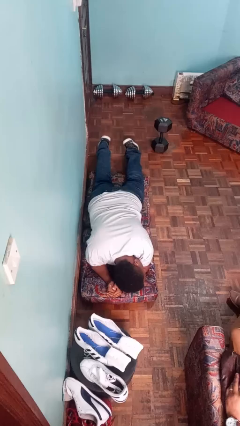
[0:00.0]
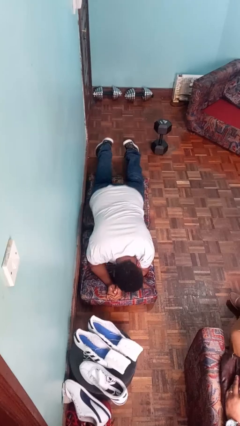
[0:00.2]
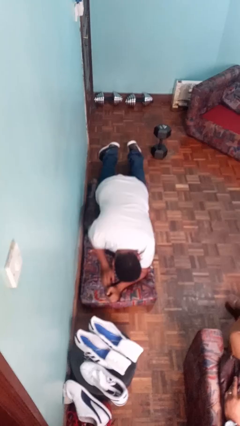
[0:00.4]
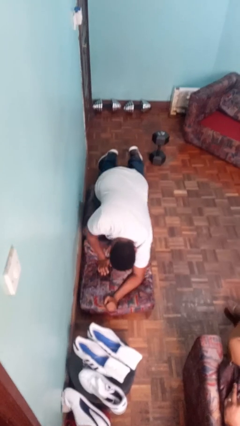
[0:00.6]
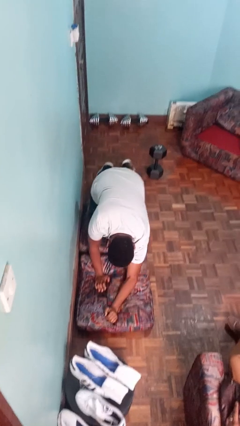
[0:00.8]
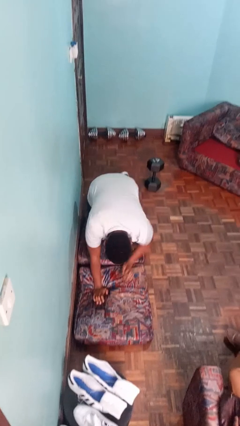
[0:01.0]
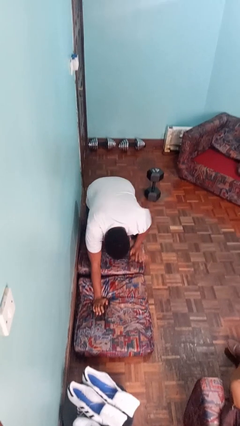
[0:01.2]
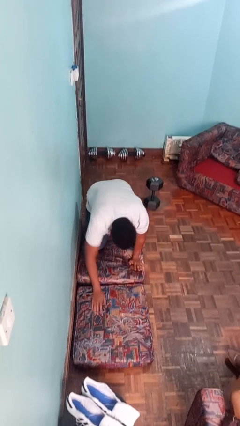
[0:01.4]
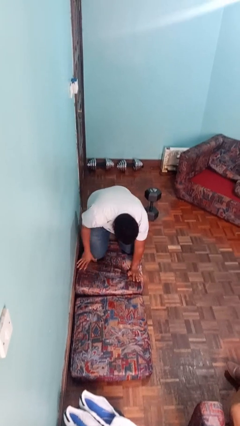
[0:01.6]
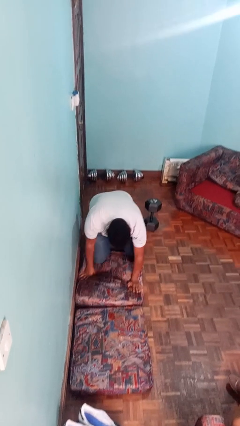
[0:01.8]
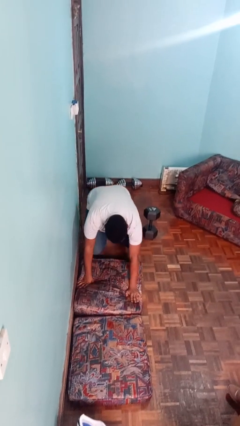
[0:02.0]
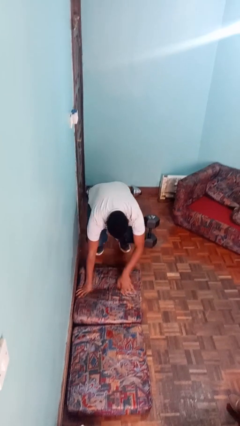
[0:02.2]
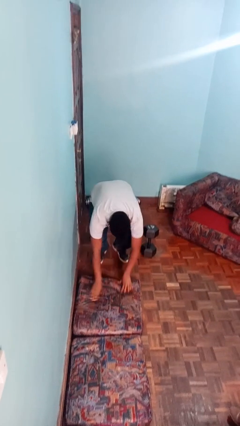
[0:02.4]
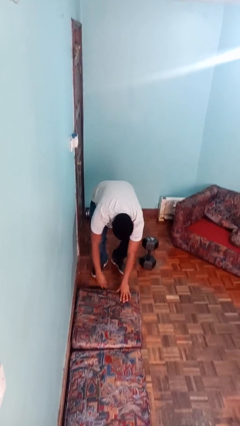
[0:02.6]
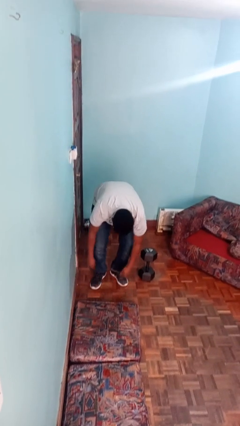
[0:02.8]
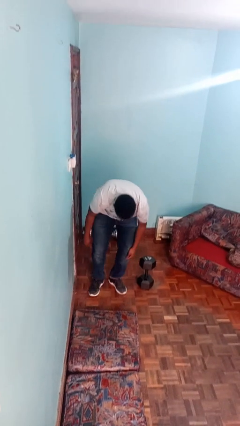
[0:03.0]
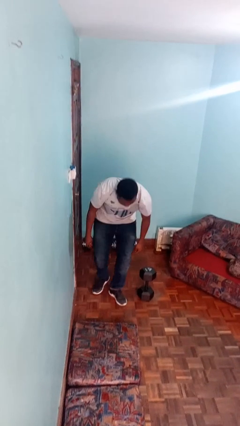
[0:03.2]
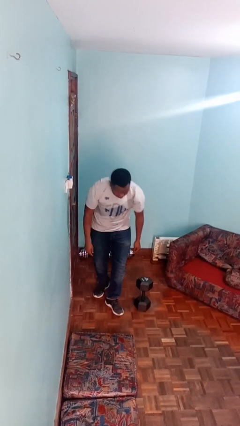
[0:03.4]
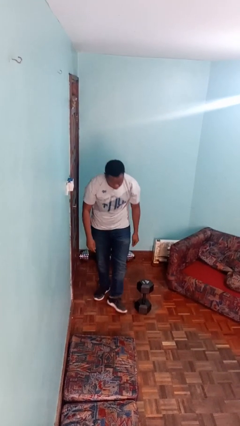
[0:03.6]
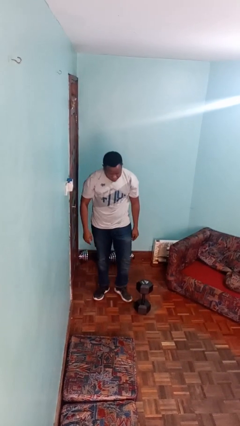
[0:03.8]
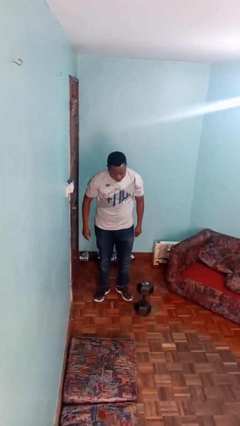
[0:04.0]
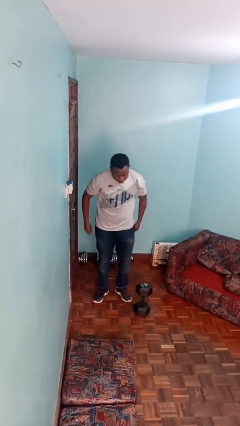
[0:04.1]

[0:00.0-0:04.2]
person stands up from floor

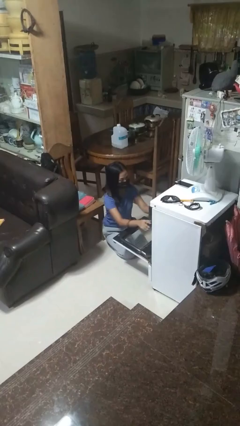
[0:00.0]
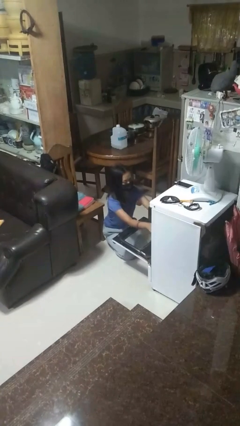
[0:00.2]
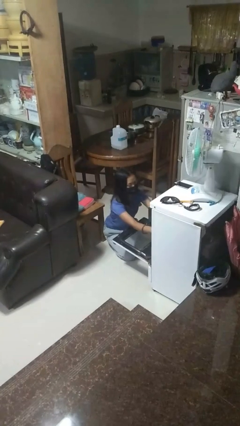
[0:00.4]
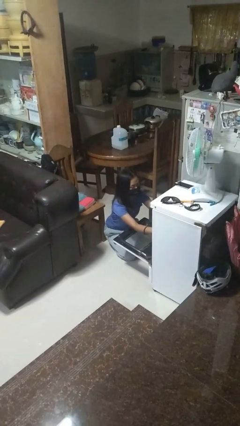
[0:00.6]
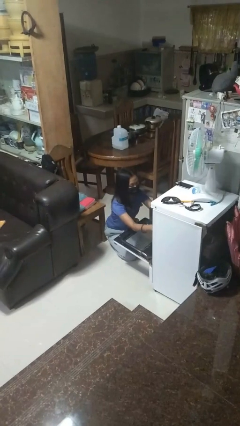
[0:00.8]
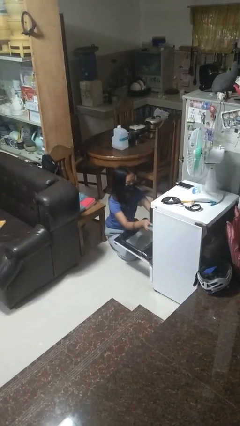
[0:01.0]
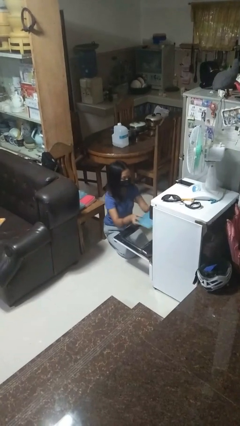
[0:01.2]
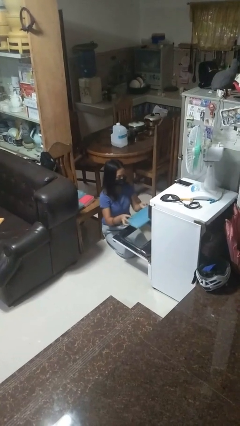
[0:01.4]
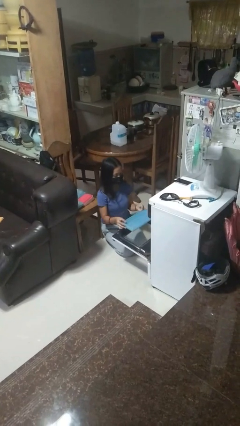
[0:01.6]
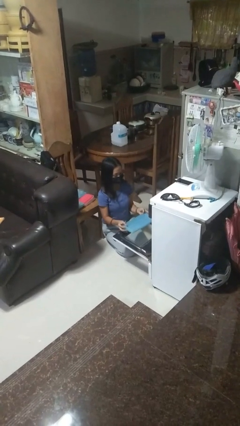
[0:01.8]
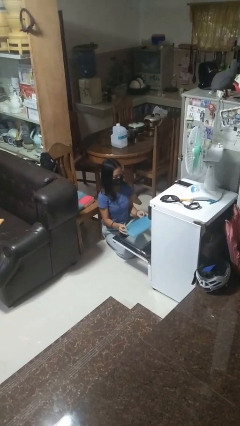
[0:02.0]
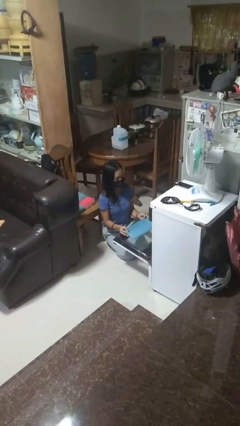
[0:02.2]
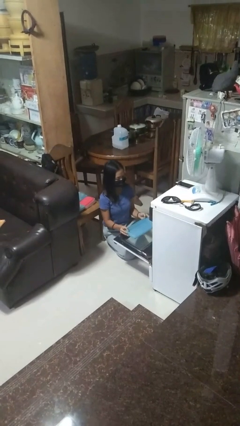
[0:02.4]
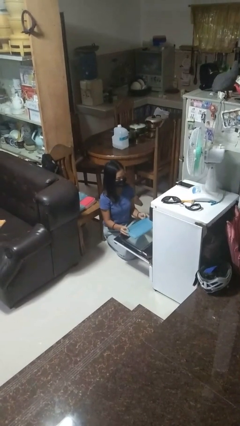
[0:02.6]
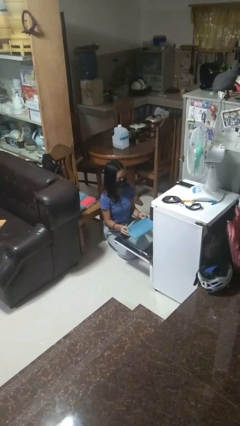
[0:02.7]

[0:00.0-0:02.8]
person takes object from oven

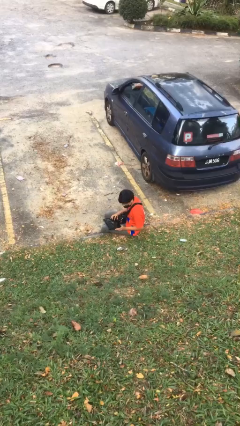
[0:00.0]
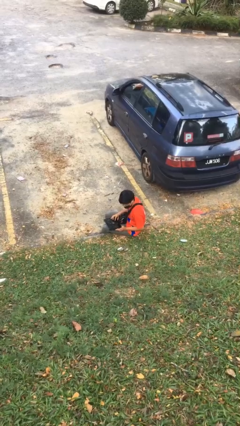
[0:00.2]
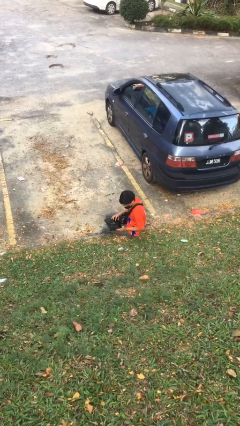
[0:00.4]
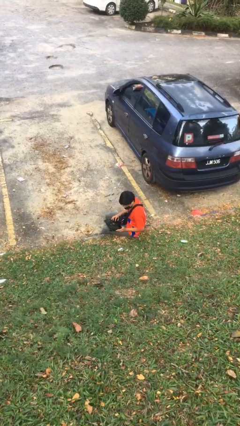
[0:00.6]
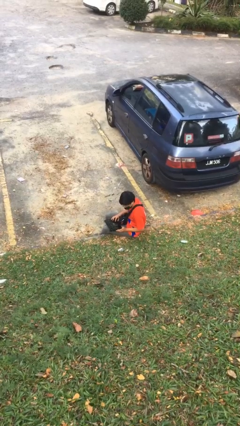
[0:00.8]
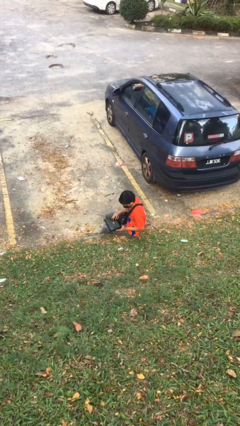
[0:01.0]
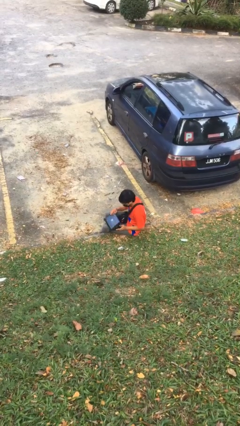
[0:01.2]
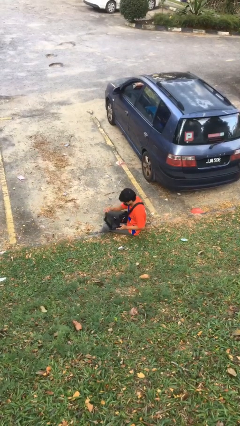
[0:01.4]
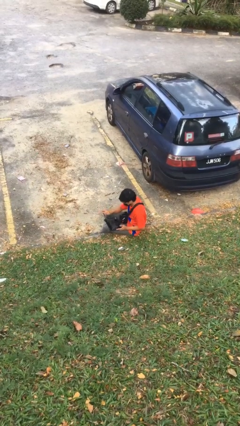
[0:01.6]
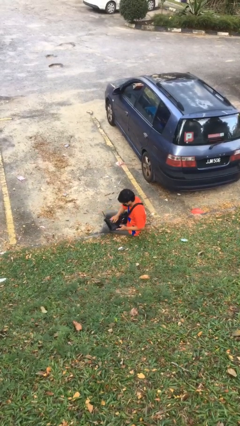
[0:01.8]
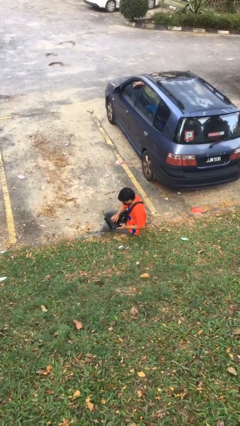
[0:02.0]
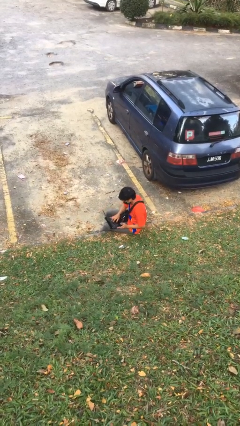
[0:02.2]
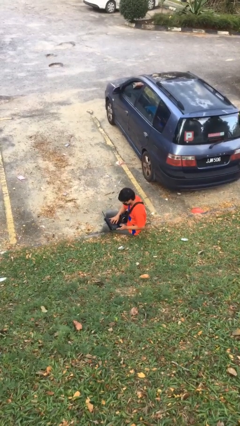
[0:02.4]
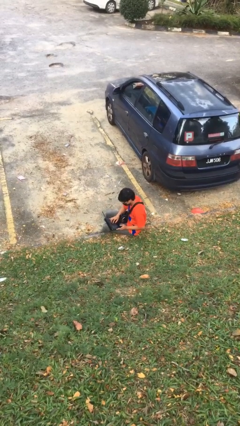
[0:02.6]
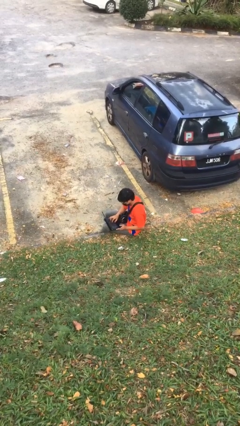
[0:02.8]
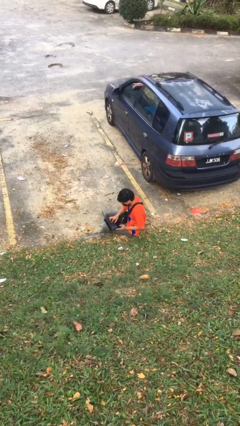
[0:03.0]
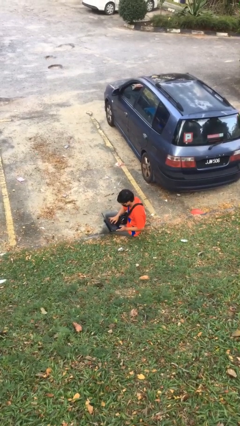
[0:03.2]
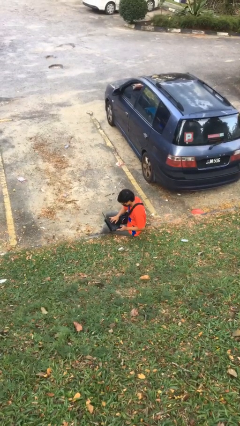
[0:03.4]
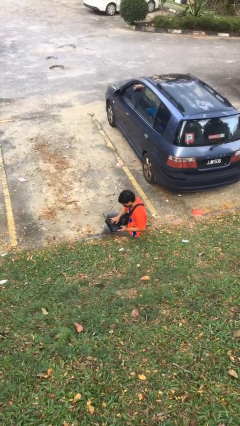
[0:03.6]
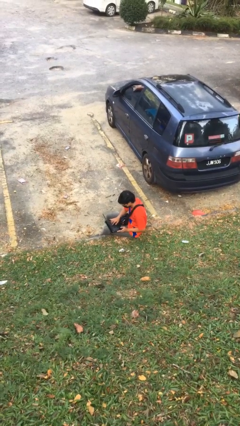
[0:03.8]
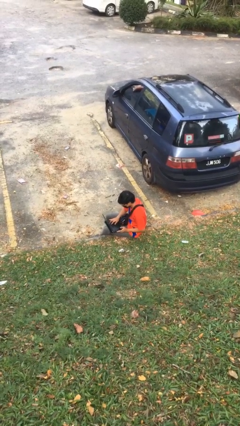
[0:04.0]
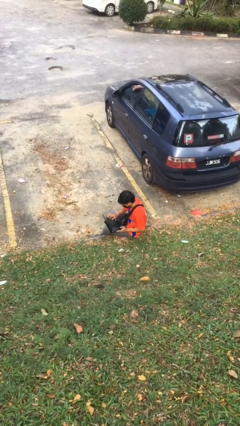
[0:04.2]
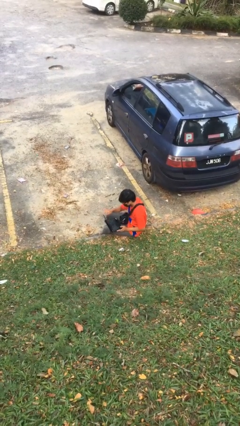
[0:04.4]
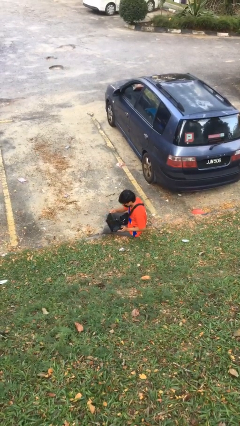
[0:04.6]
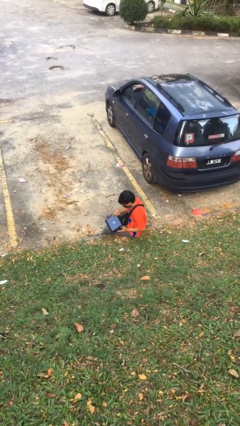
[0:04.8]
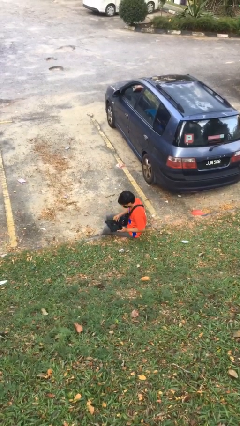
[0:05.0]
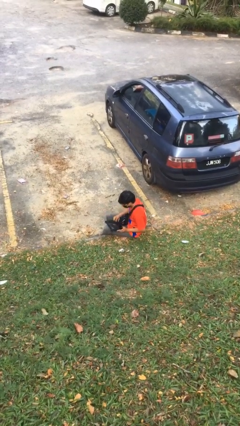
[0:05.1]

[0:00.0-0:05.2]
person interacts with laptop

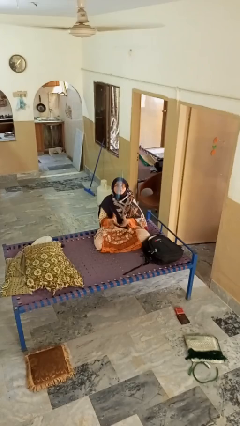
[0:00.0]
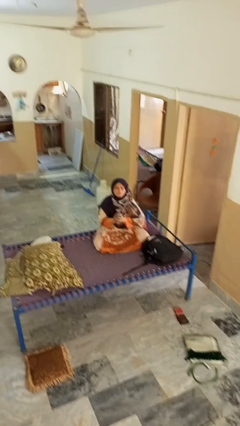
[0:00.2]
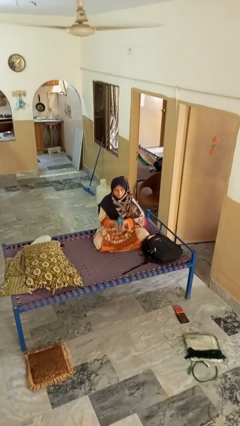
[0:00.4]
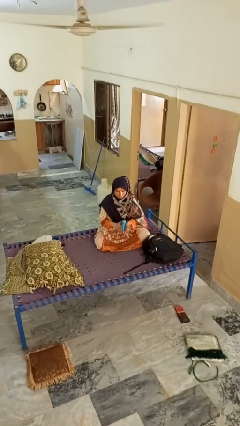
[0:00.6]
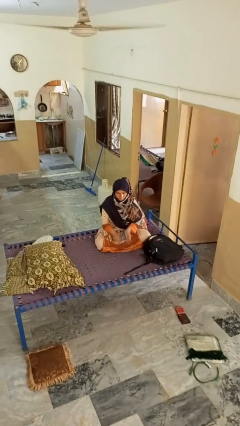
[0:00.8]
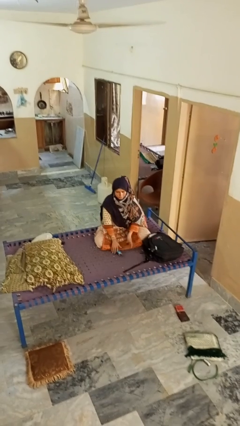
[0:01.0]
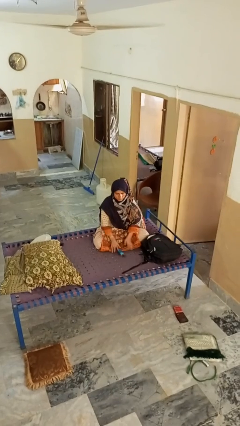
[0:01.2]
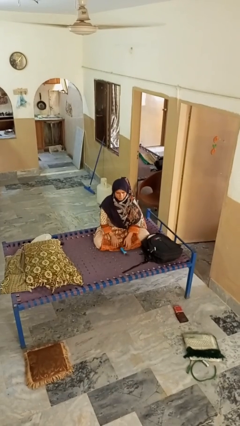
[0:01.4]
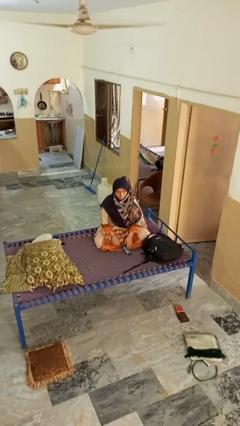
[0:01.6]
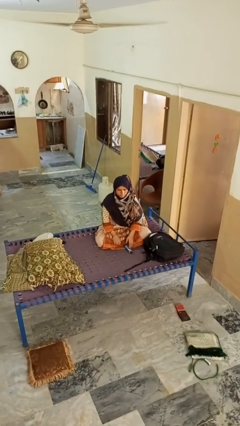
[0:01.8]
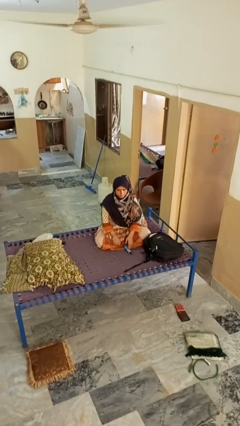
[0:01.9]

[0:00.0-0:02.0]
person catches dropped object

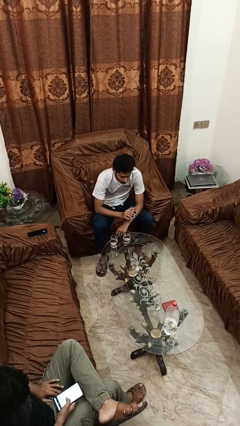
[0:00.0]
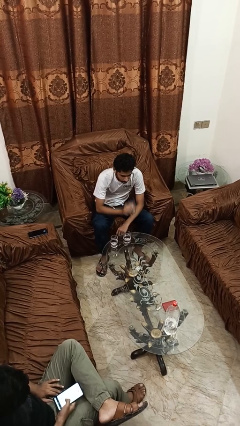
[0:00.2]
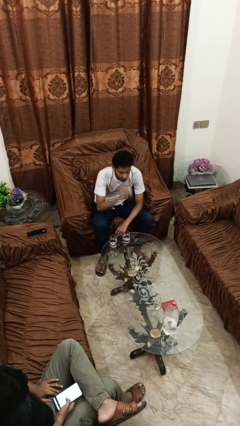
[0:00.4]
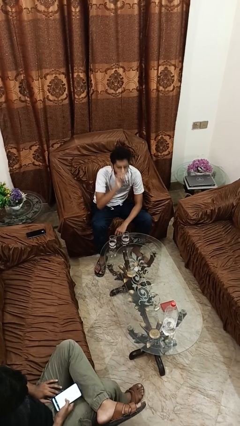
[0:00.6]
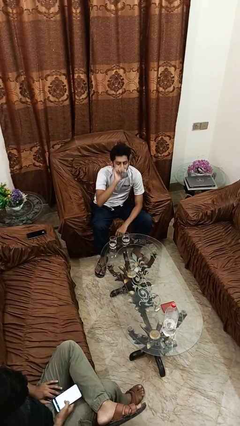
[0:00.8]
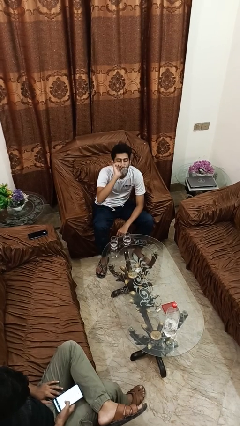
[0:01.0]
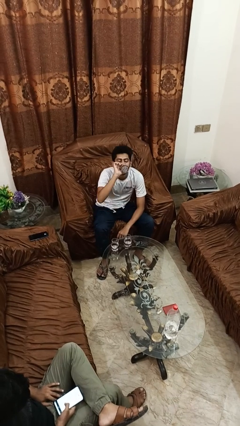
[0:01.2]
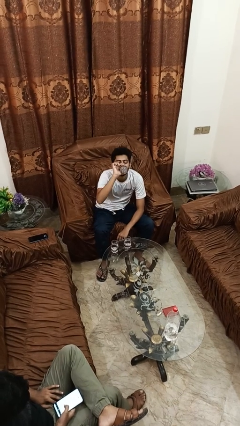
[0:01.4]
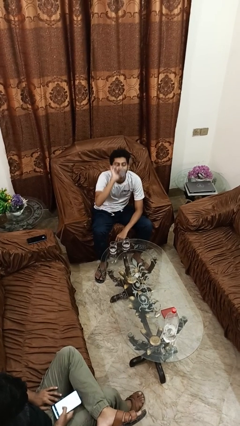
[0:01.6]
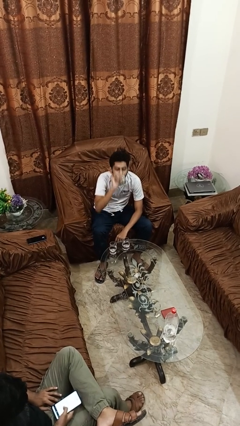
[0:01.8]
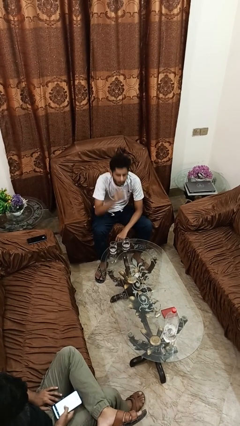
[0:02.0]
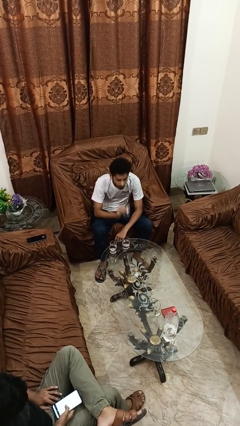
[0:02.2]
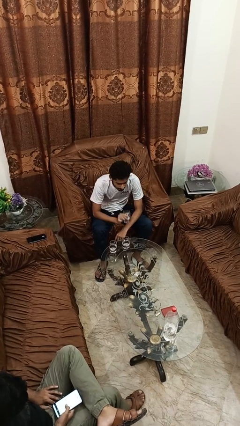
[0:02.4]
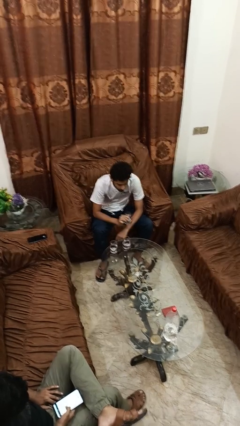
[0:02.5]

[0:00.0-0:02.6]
person drinks from shotglass

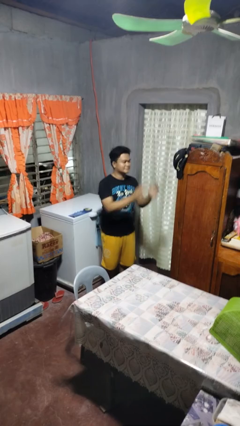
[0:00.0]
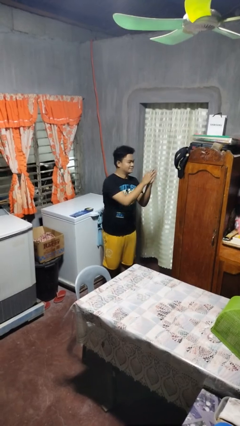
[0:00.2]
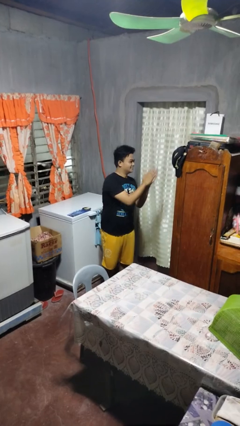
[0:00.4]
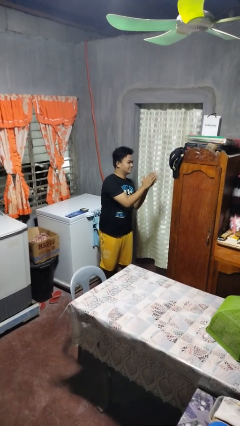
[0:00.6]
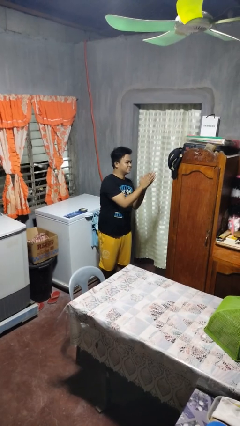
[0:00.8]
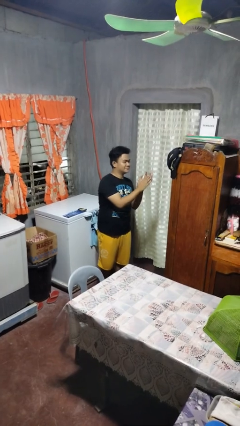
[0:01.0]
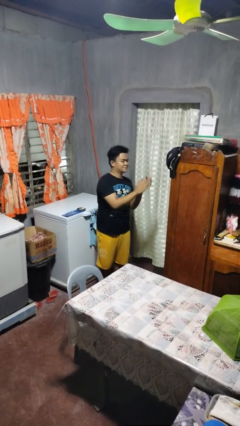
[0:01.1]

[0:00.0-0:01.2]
person claps hands
